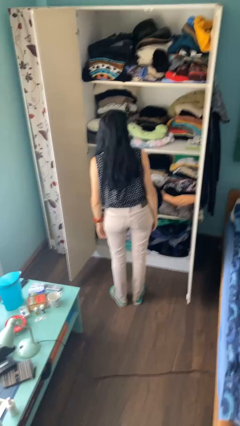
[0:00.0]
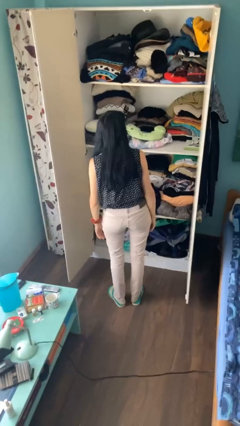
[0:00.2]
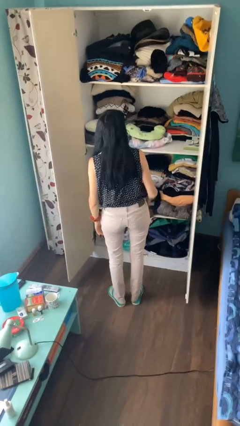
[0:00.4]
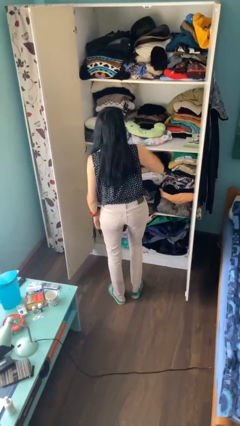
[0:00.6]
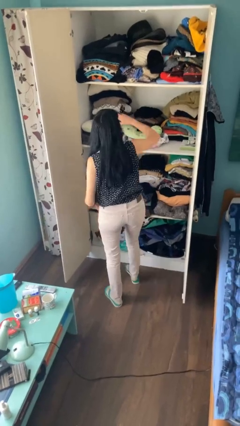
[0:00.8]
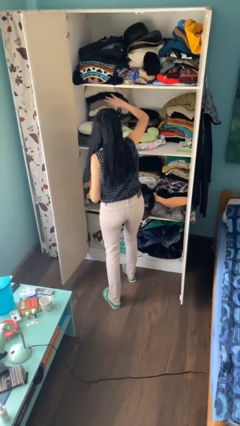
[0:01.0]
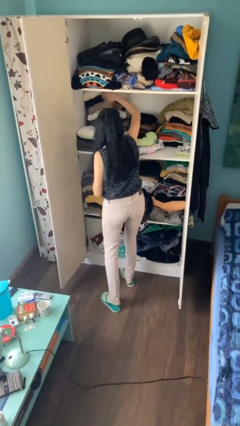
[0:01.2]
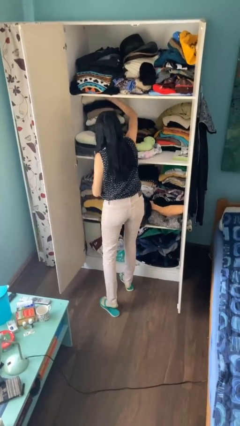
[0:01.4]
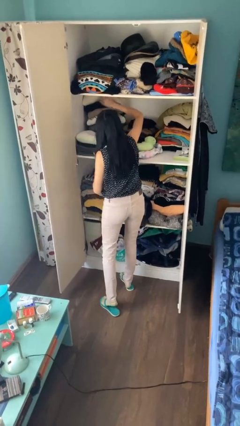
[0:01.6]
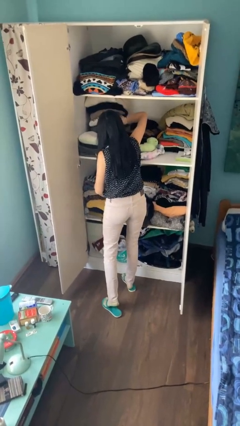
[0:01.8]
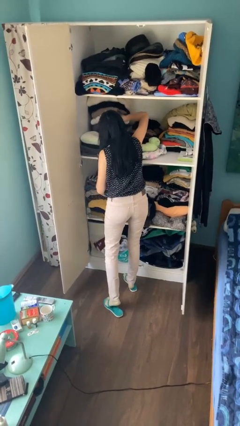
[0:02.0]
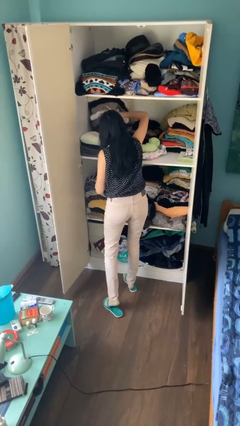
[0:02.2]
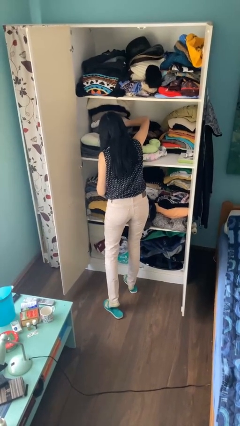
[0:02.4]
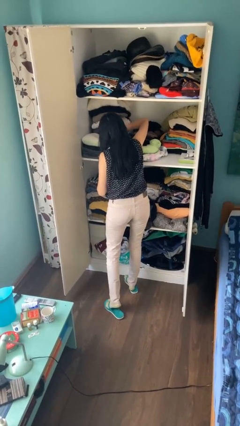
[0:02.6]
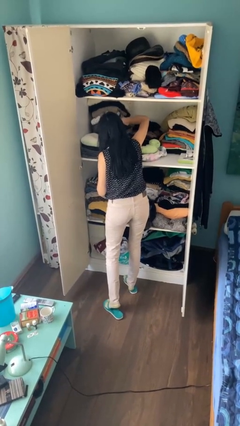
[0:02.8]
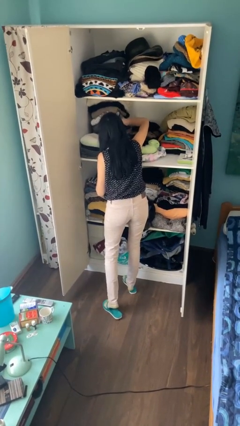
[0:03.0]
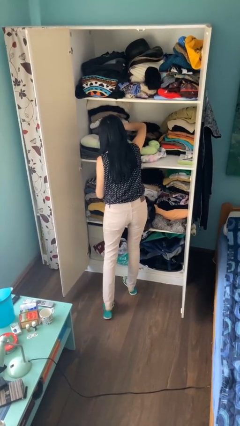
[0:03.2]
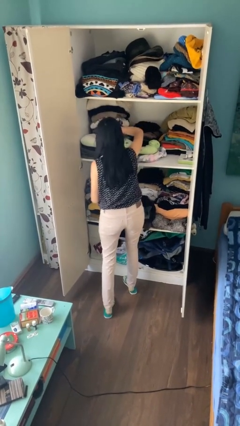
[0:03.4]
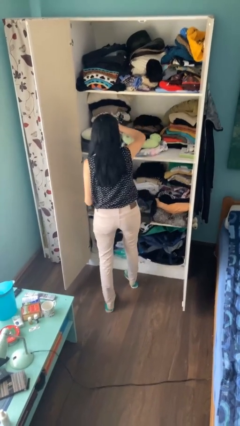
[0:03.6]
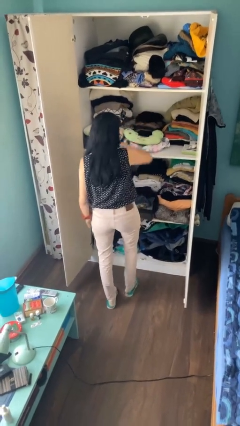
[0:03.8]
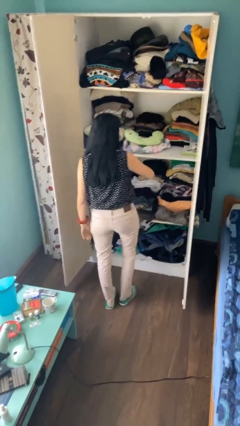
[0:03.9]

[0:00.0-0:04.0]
person searches in cabinet

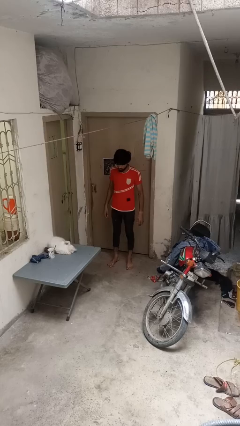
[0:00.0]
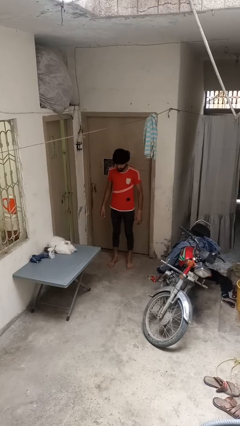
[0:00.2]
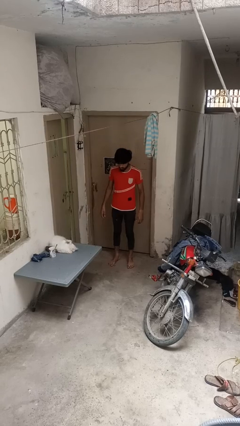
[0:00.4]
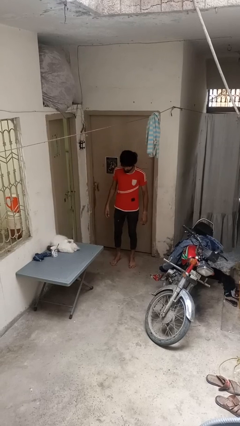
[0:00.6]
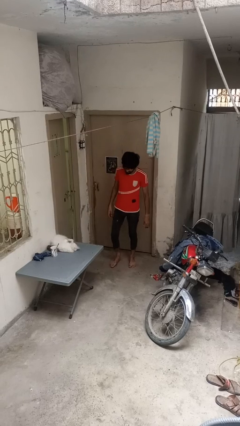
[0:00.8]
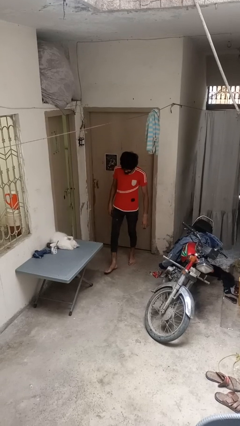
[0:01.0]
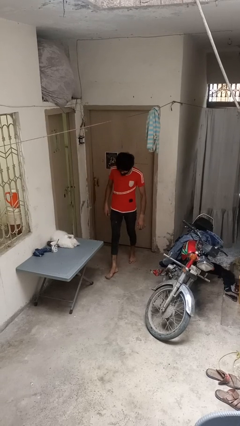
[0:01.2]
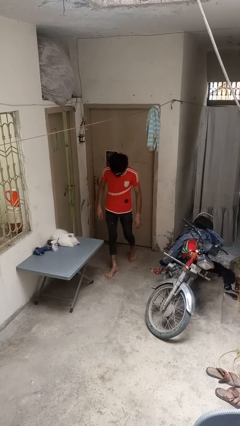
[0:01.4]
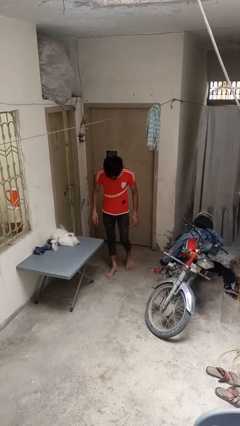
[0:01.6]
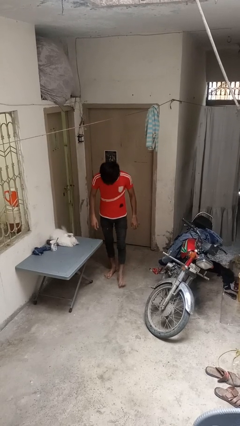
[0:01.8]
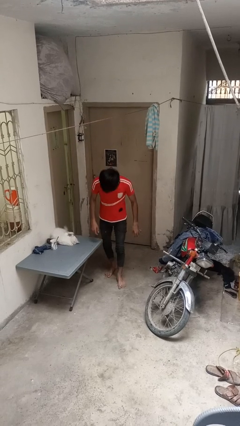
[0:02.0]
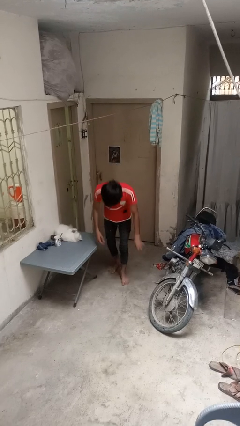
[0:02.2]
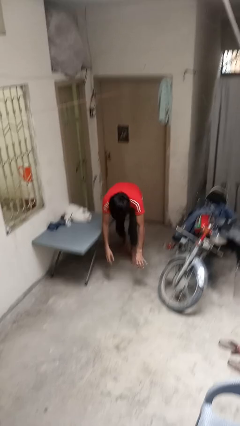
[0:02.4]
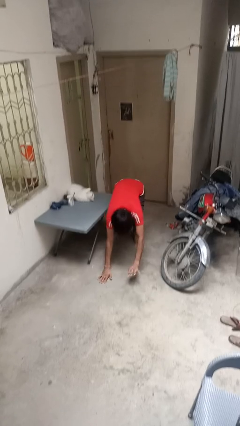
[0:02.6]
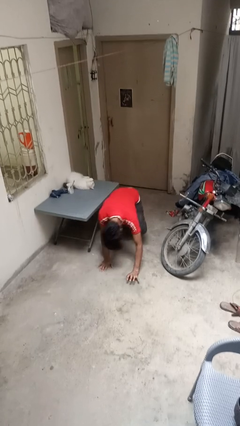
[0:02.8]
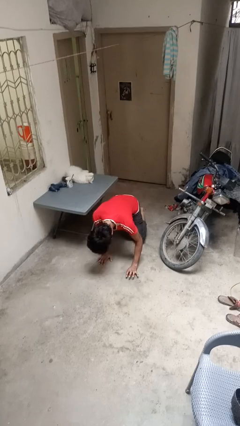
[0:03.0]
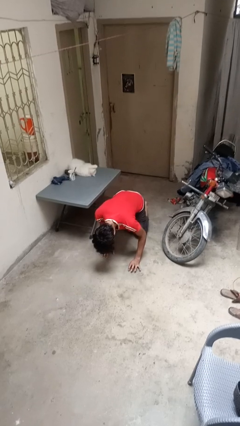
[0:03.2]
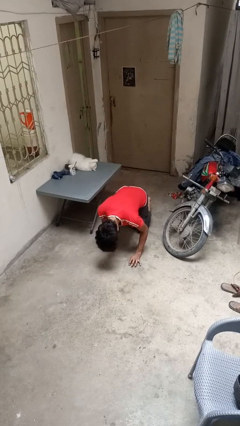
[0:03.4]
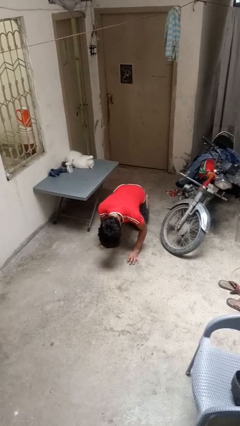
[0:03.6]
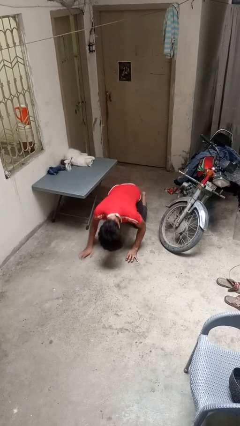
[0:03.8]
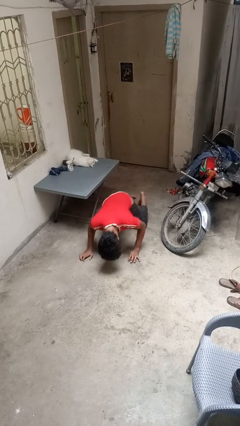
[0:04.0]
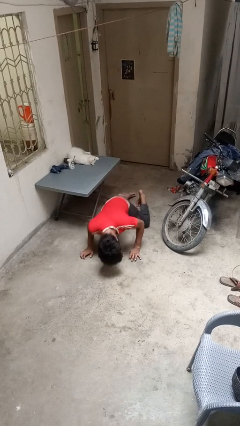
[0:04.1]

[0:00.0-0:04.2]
person trips on object on floor

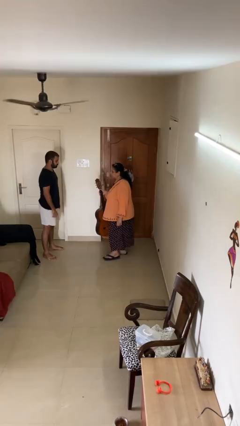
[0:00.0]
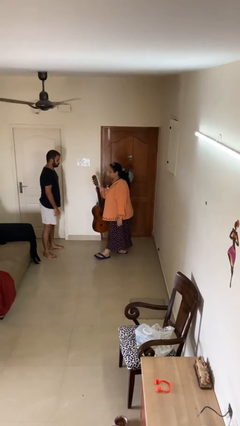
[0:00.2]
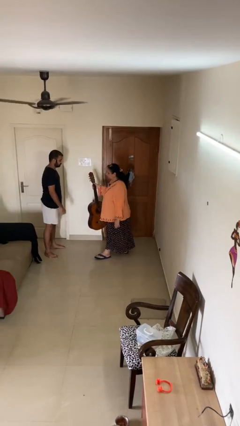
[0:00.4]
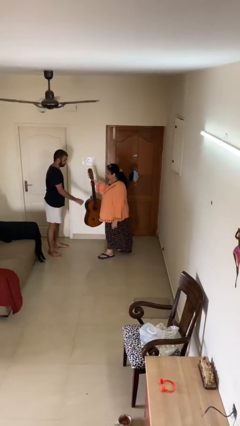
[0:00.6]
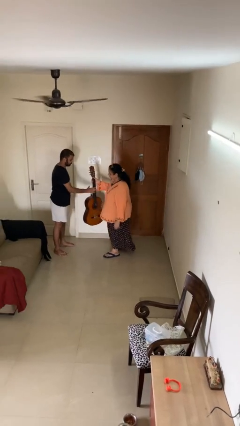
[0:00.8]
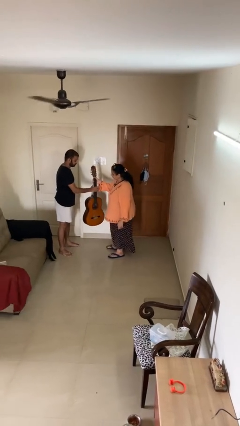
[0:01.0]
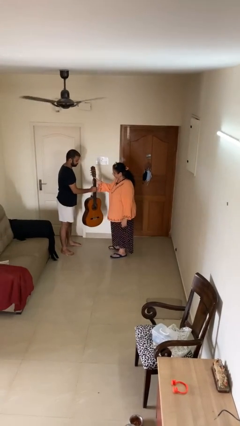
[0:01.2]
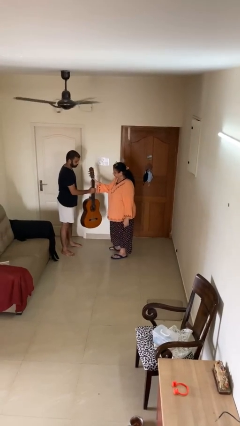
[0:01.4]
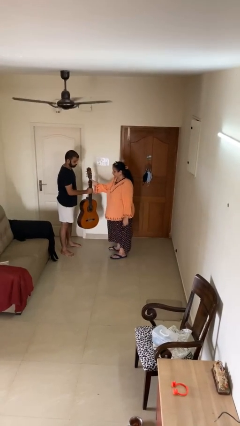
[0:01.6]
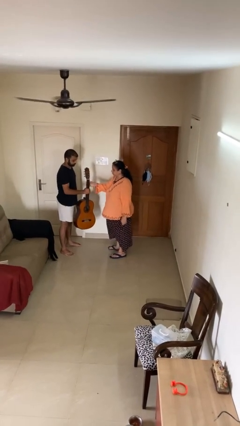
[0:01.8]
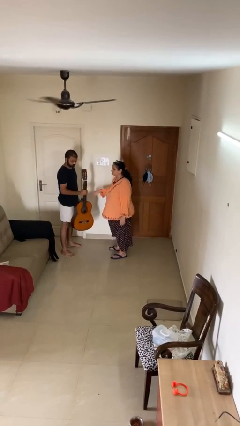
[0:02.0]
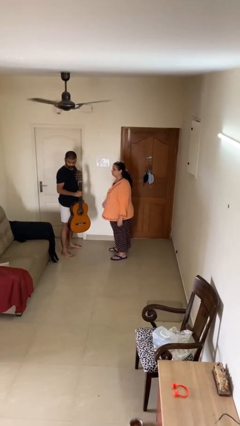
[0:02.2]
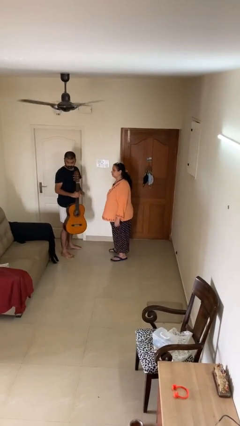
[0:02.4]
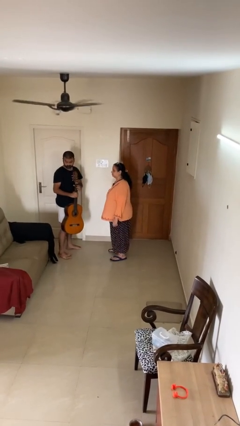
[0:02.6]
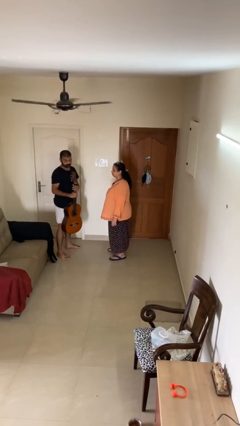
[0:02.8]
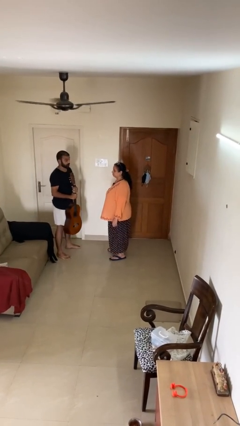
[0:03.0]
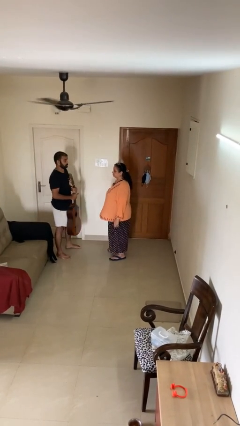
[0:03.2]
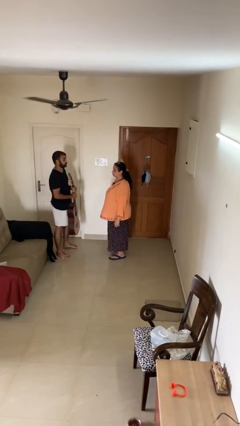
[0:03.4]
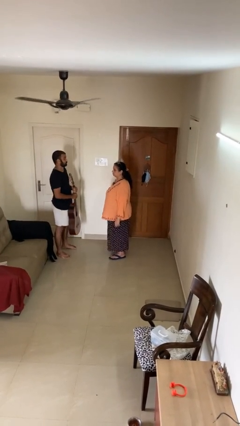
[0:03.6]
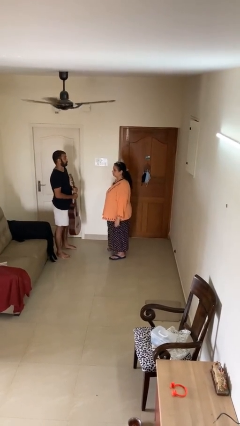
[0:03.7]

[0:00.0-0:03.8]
person transfers object to person

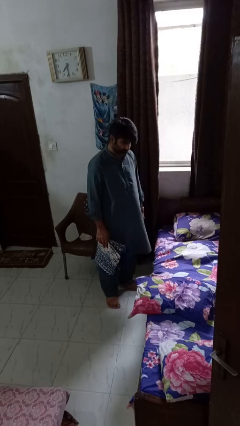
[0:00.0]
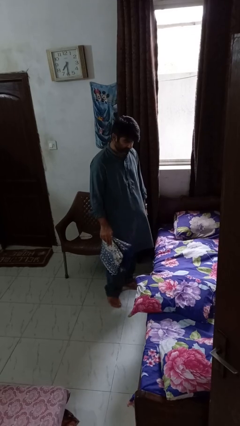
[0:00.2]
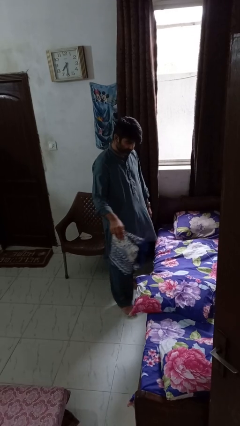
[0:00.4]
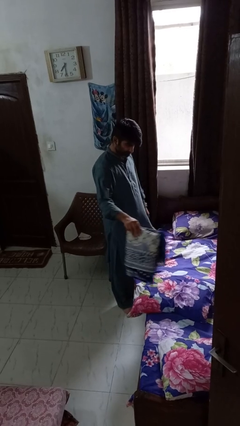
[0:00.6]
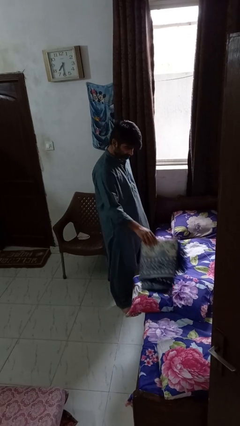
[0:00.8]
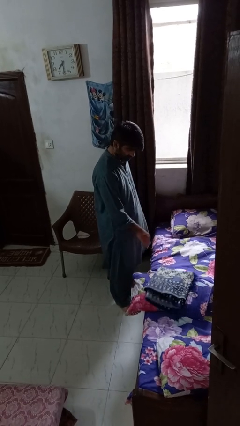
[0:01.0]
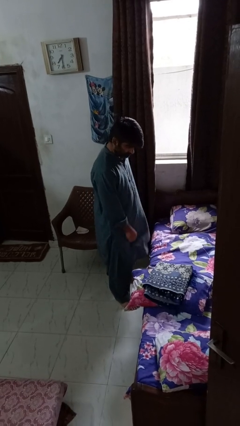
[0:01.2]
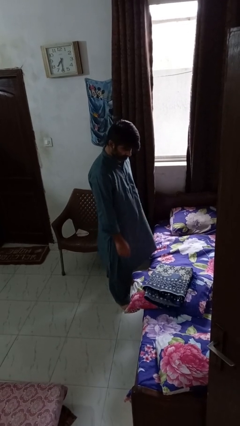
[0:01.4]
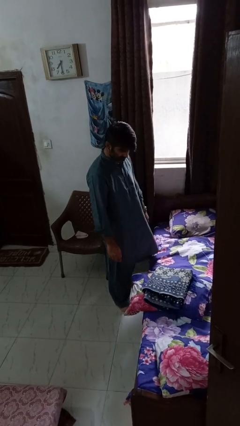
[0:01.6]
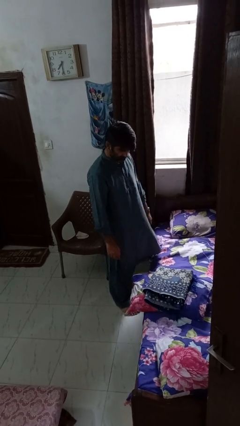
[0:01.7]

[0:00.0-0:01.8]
person puts down object on bed

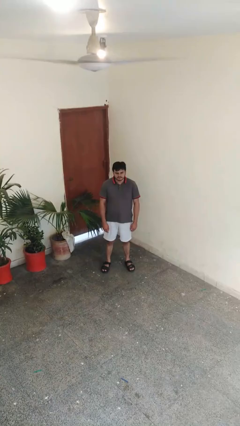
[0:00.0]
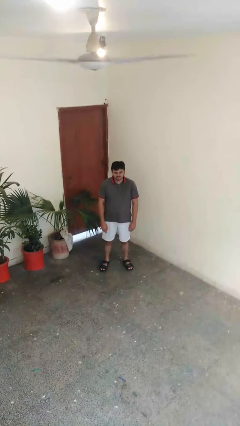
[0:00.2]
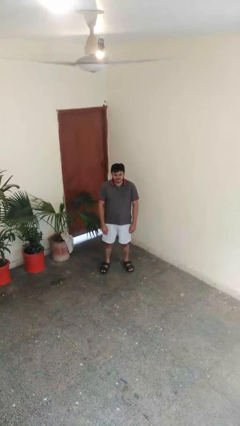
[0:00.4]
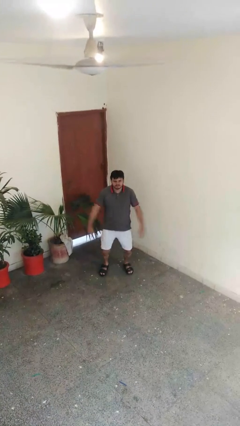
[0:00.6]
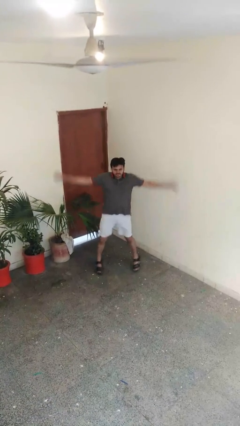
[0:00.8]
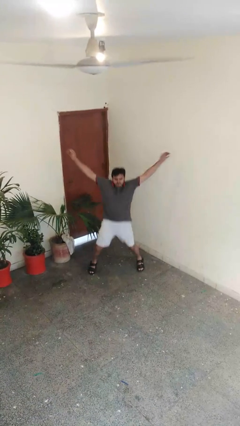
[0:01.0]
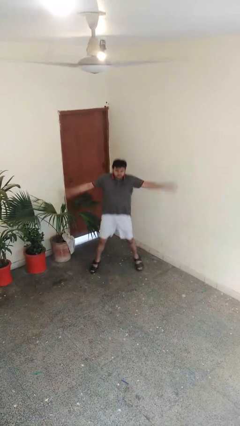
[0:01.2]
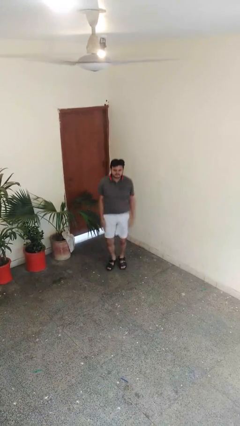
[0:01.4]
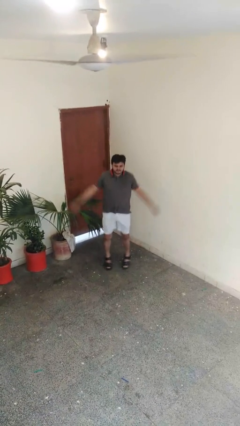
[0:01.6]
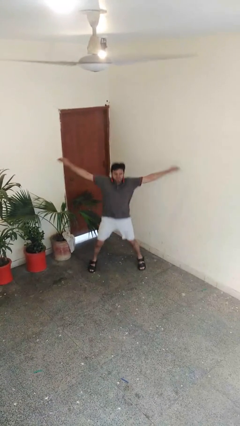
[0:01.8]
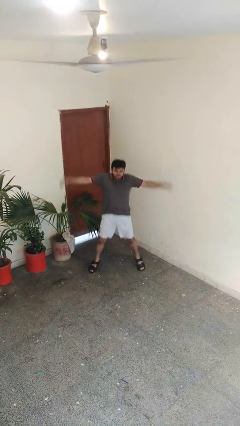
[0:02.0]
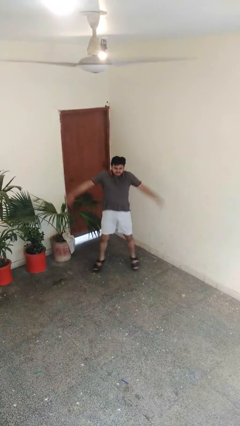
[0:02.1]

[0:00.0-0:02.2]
person exercises with jumping jacks

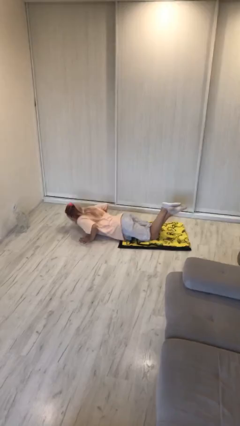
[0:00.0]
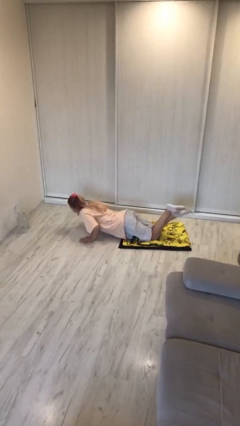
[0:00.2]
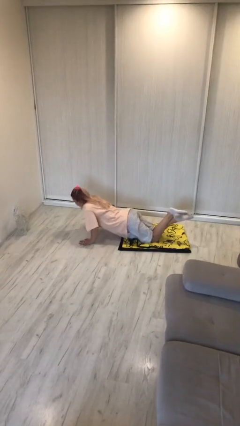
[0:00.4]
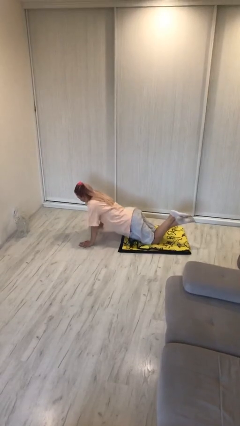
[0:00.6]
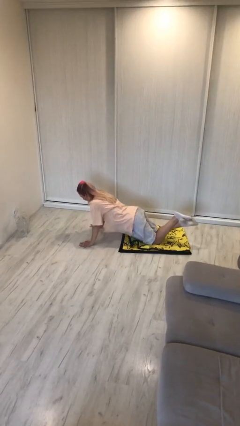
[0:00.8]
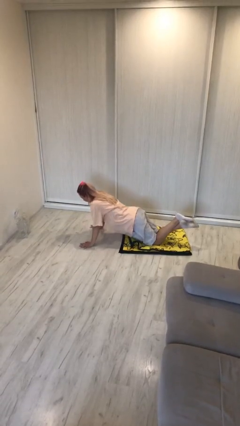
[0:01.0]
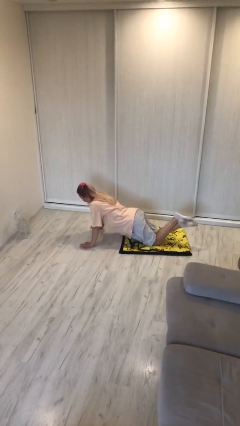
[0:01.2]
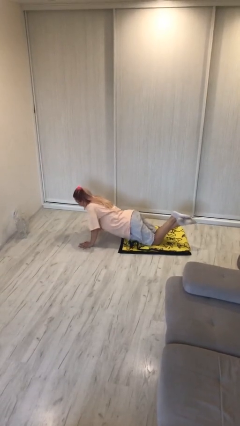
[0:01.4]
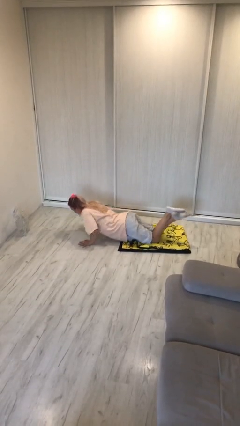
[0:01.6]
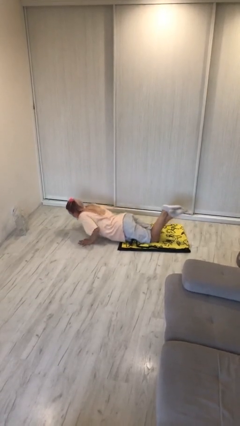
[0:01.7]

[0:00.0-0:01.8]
person exercises with pushup
